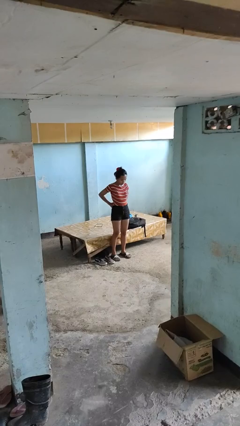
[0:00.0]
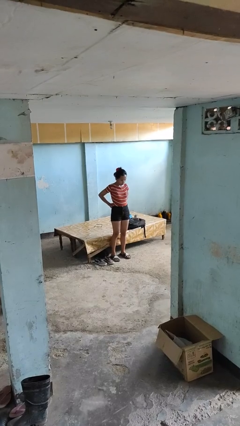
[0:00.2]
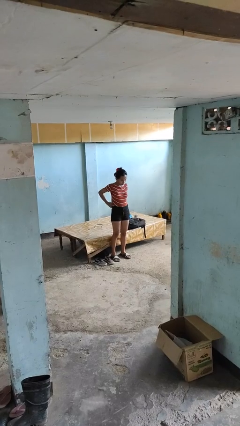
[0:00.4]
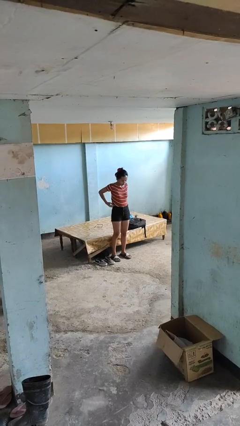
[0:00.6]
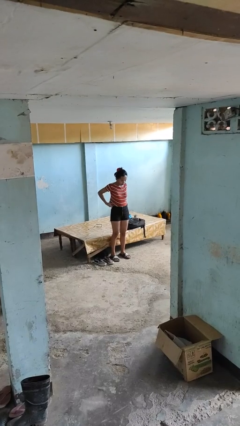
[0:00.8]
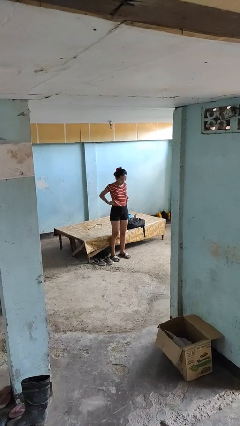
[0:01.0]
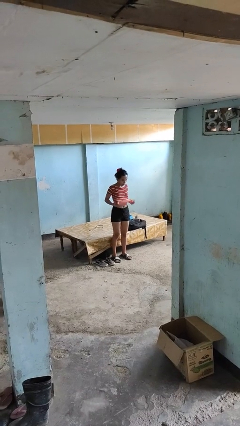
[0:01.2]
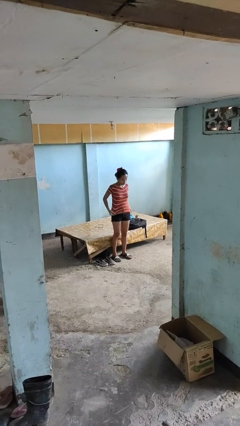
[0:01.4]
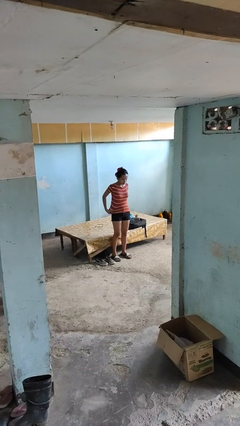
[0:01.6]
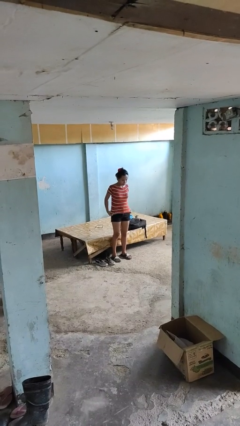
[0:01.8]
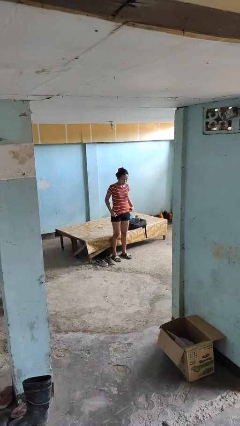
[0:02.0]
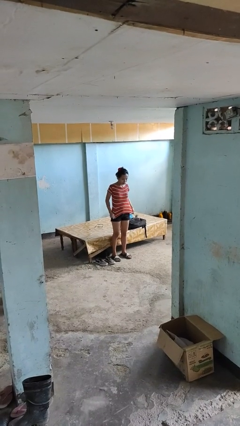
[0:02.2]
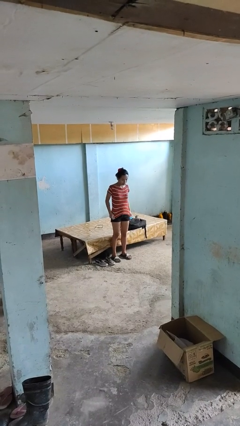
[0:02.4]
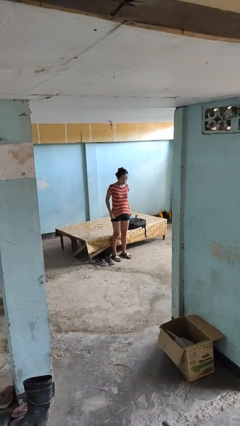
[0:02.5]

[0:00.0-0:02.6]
person untucks shirt

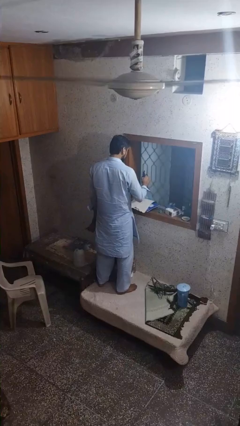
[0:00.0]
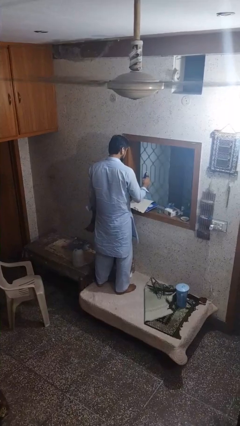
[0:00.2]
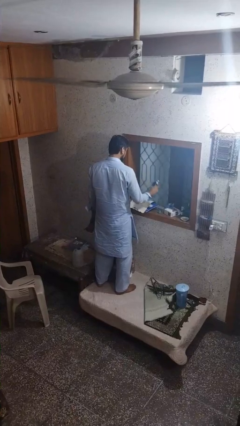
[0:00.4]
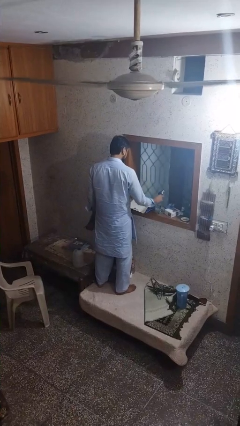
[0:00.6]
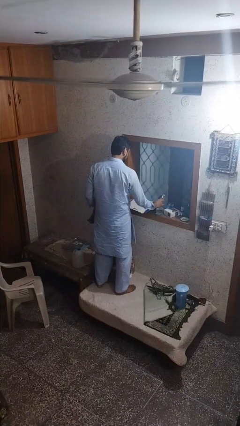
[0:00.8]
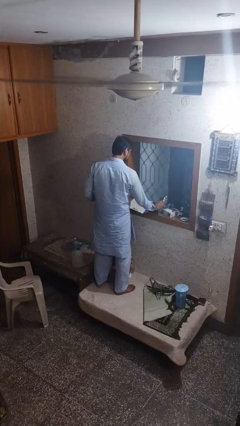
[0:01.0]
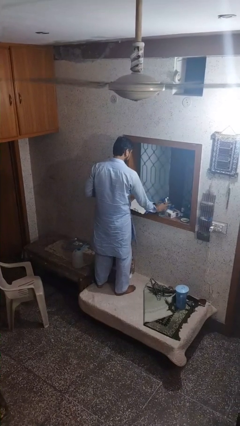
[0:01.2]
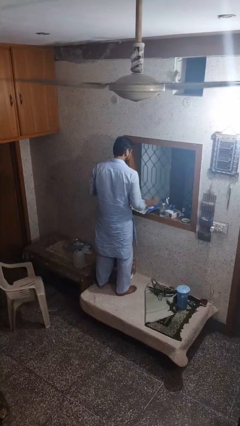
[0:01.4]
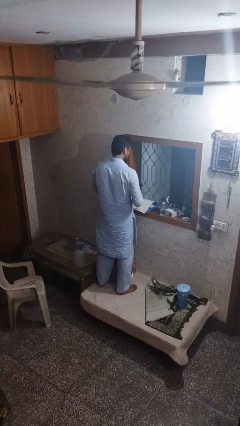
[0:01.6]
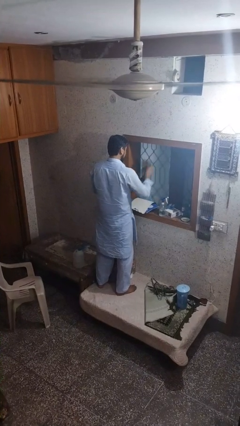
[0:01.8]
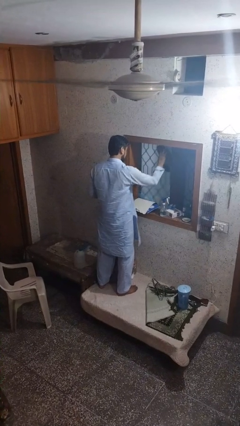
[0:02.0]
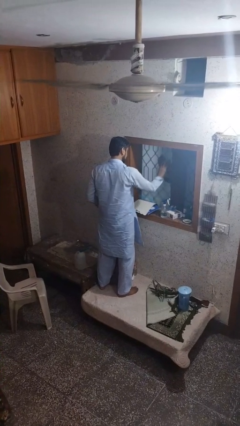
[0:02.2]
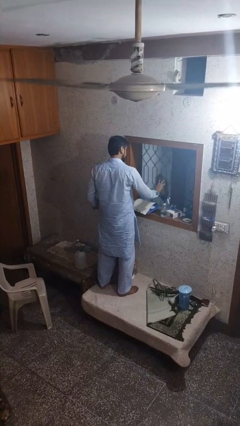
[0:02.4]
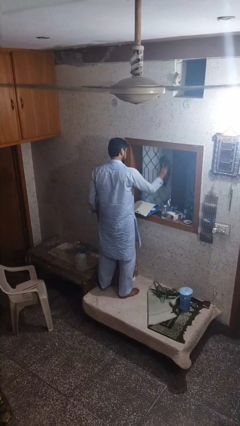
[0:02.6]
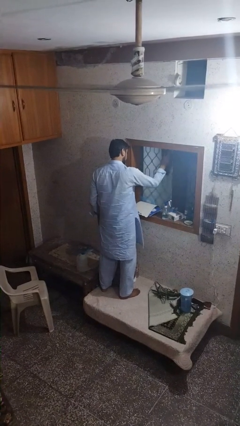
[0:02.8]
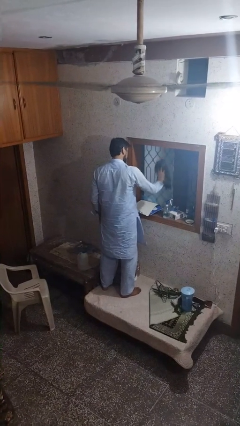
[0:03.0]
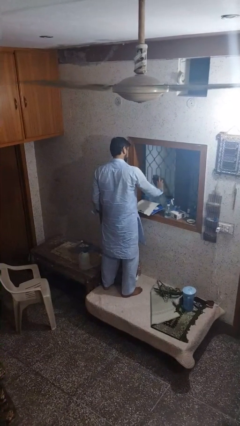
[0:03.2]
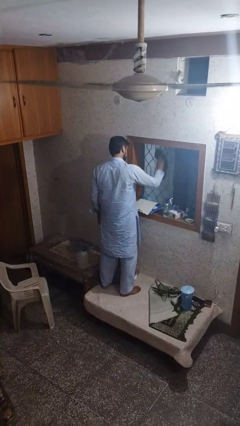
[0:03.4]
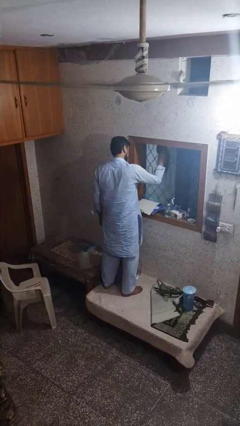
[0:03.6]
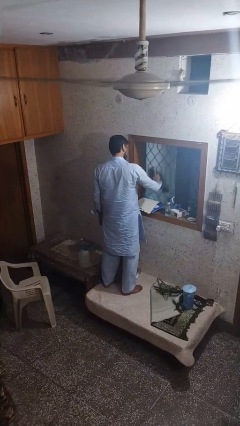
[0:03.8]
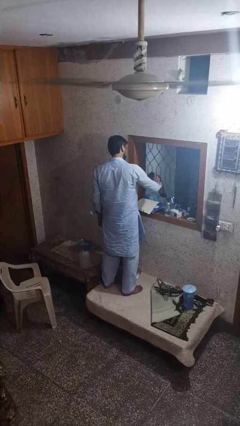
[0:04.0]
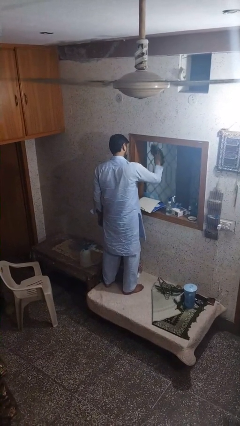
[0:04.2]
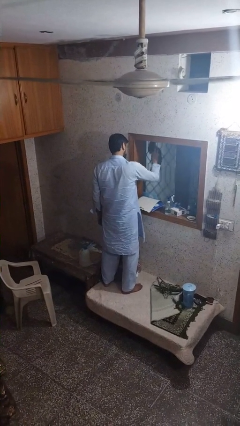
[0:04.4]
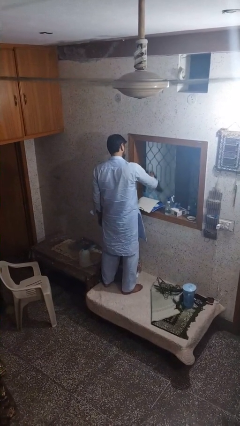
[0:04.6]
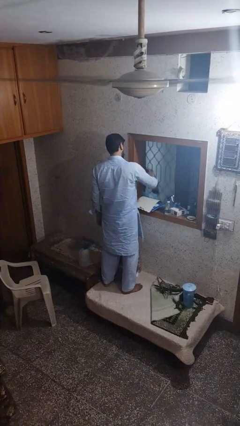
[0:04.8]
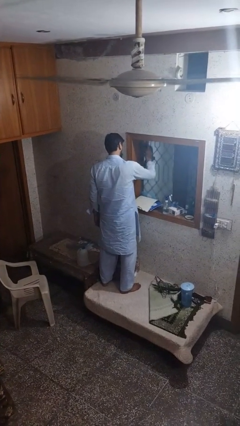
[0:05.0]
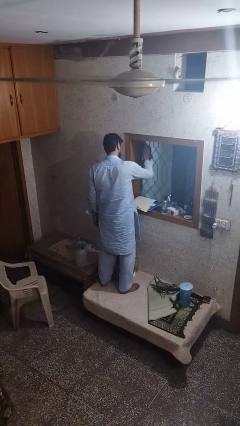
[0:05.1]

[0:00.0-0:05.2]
person washes window

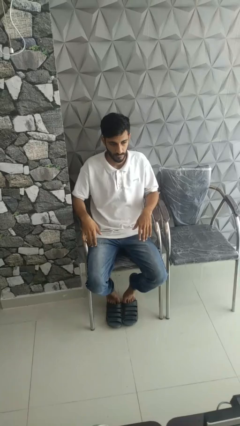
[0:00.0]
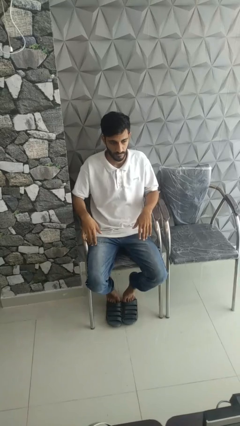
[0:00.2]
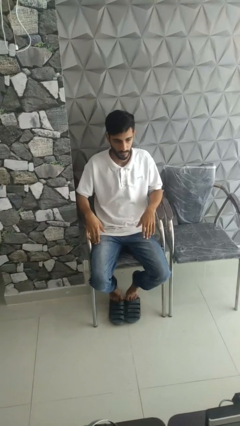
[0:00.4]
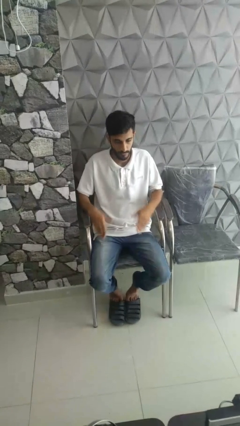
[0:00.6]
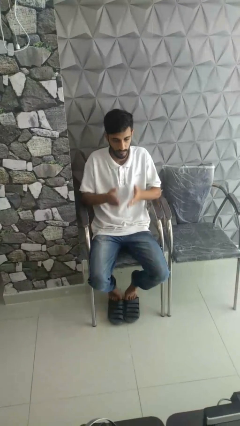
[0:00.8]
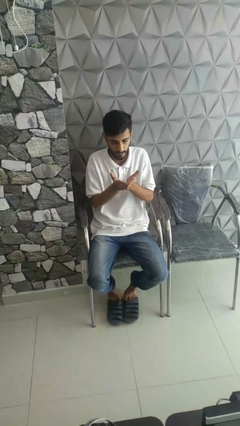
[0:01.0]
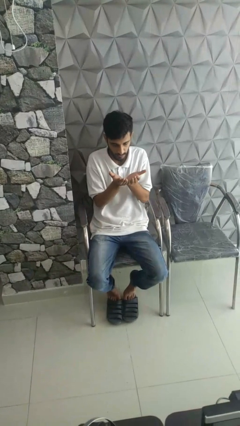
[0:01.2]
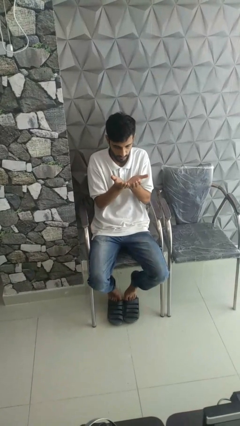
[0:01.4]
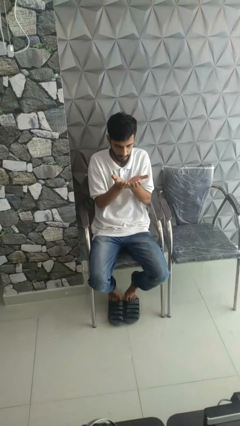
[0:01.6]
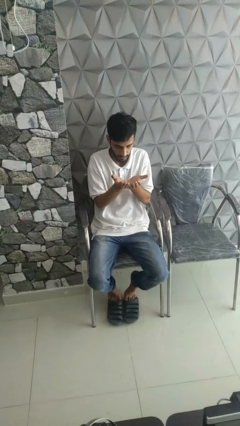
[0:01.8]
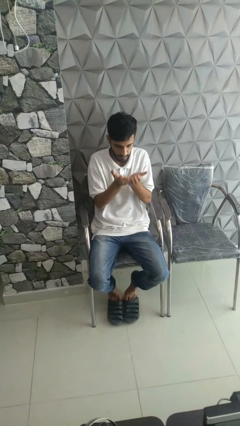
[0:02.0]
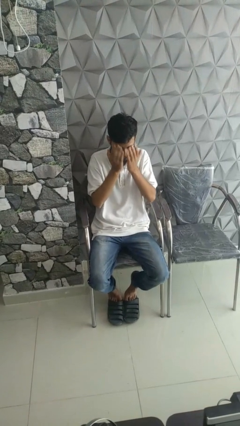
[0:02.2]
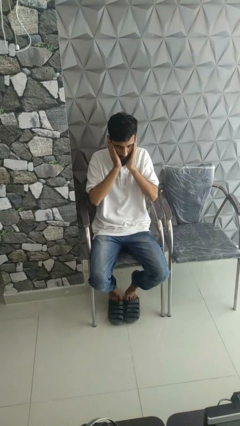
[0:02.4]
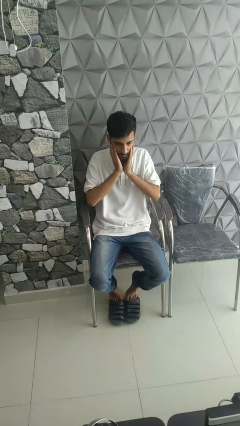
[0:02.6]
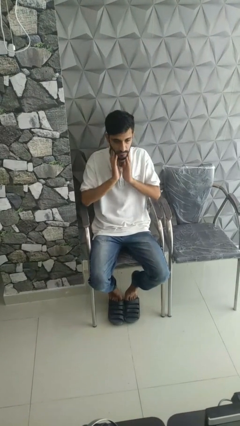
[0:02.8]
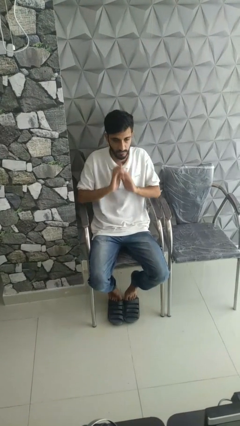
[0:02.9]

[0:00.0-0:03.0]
person prays

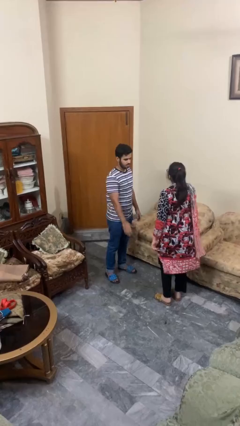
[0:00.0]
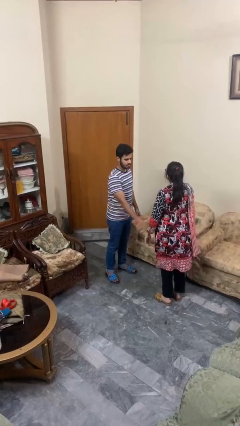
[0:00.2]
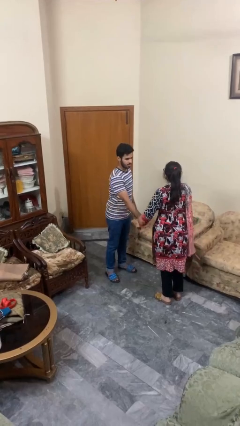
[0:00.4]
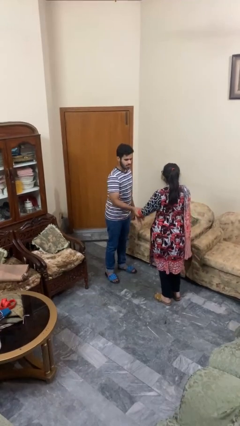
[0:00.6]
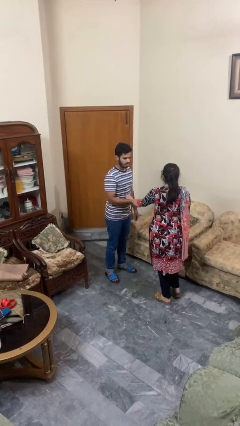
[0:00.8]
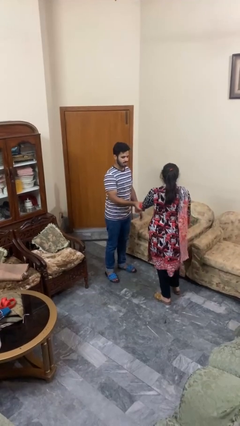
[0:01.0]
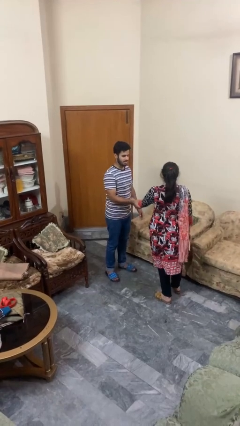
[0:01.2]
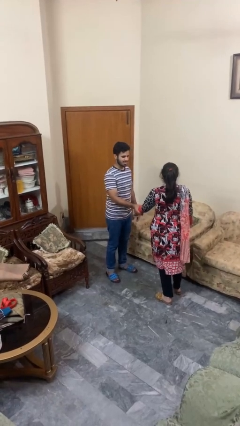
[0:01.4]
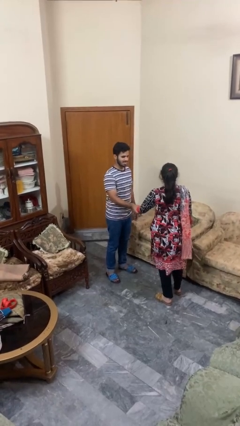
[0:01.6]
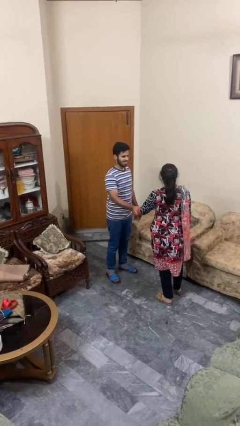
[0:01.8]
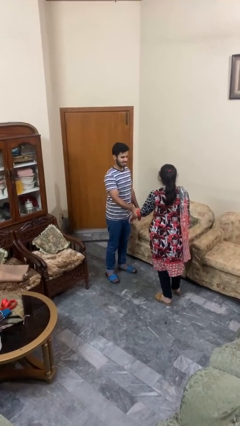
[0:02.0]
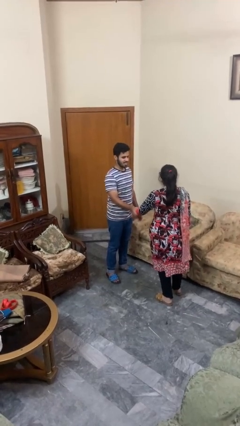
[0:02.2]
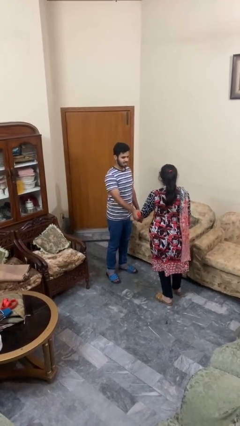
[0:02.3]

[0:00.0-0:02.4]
person grabs person by forearm

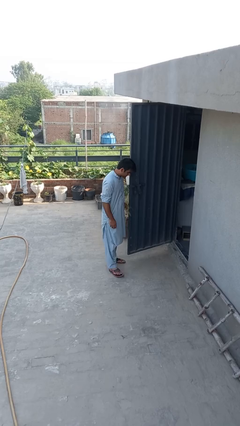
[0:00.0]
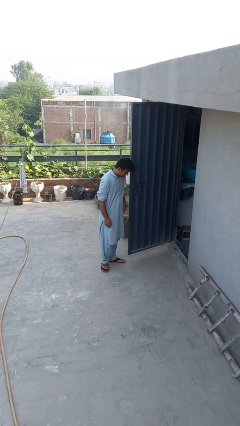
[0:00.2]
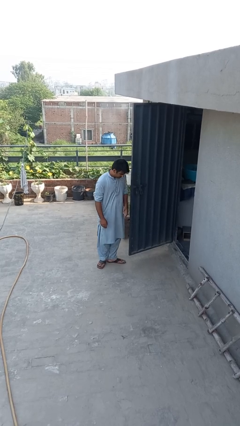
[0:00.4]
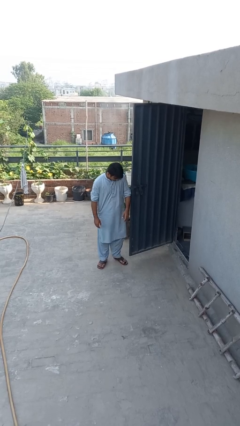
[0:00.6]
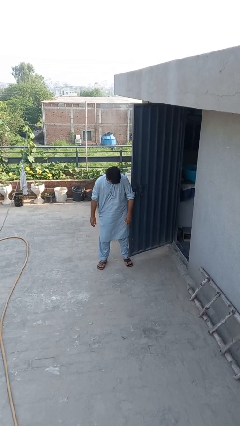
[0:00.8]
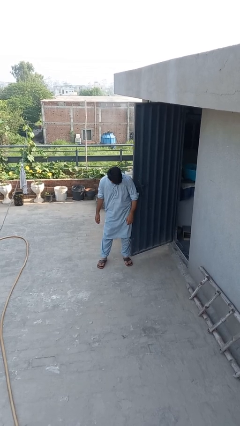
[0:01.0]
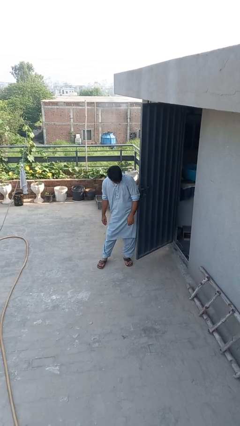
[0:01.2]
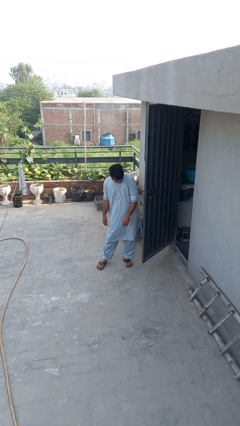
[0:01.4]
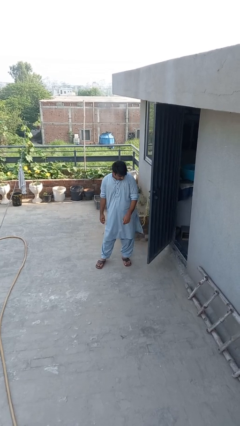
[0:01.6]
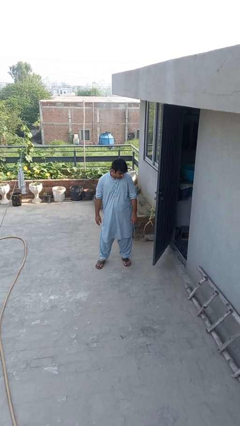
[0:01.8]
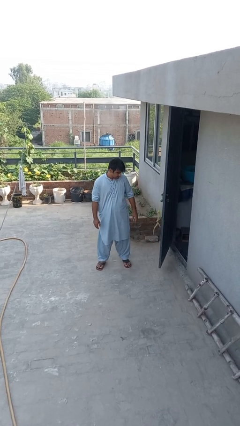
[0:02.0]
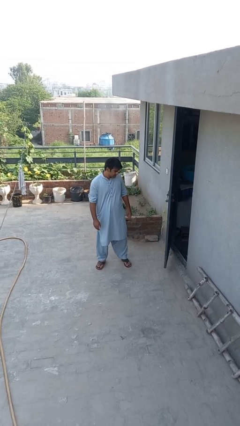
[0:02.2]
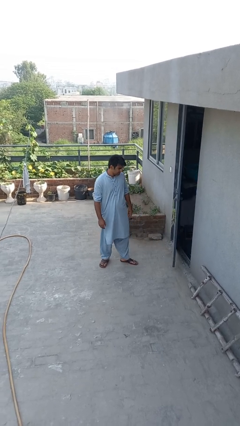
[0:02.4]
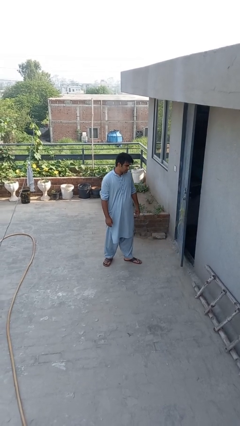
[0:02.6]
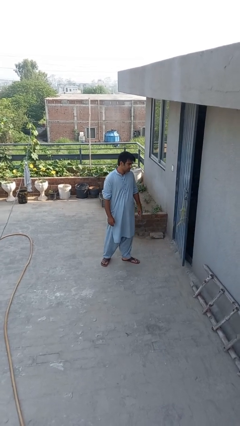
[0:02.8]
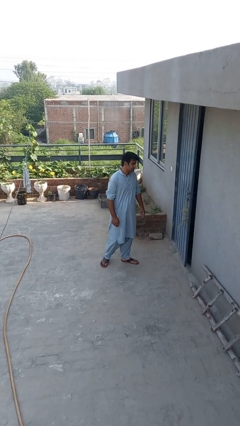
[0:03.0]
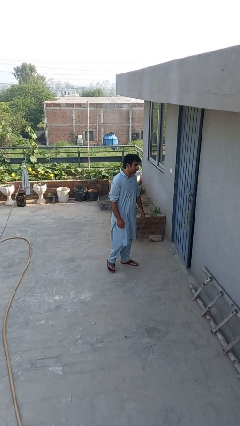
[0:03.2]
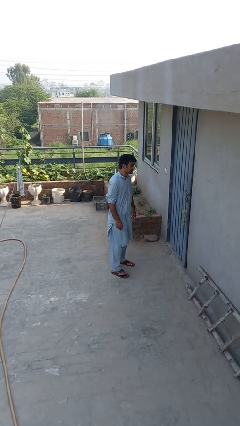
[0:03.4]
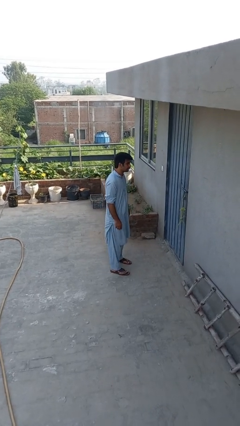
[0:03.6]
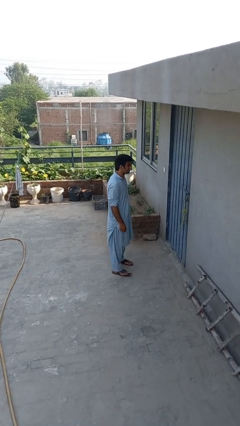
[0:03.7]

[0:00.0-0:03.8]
person closes door with hip

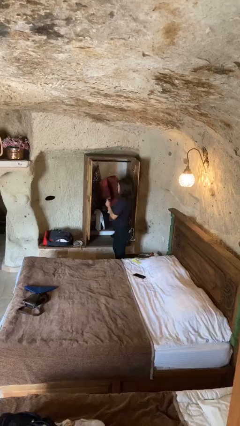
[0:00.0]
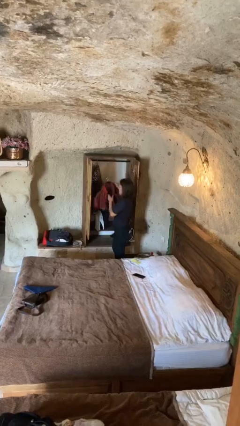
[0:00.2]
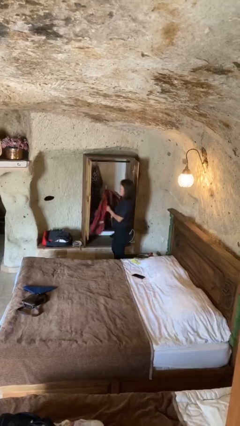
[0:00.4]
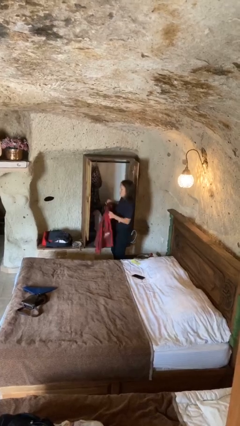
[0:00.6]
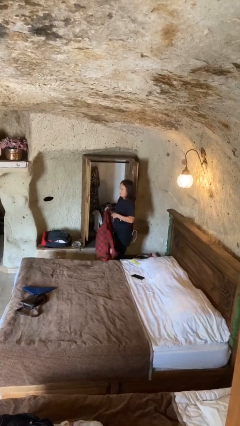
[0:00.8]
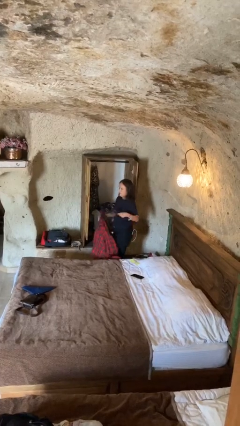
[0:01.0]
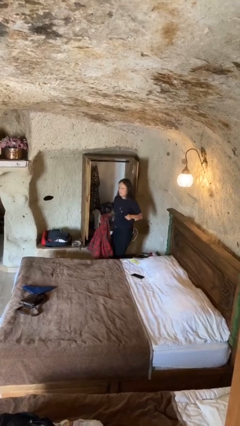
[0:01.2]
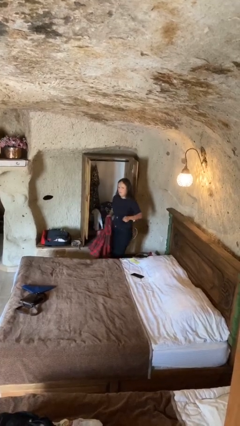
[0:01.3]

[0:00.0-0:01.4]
person takes clothes from closet
